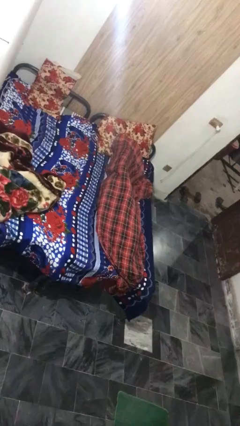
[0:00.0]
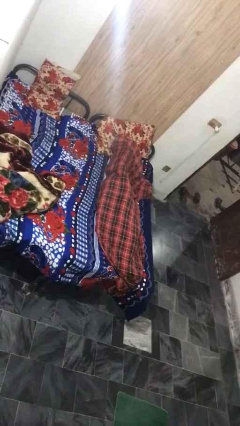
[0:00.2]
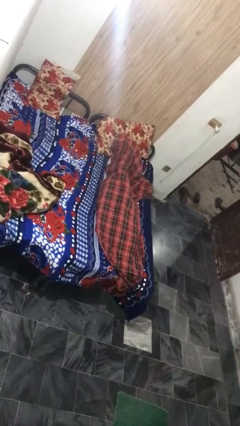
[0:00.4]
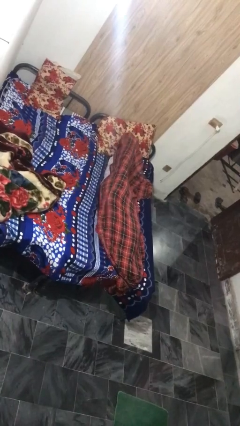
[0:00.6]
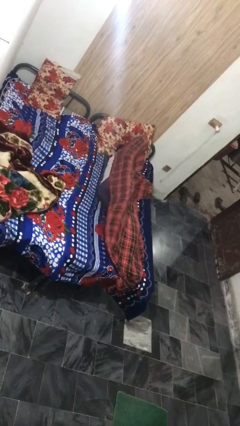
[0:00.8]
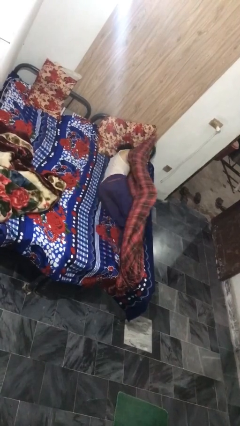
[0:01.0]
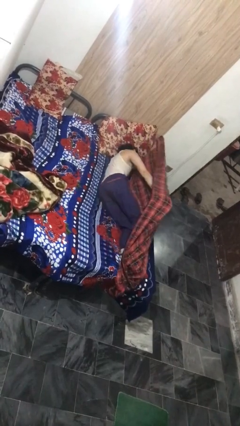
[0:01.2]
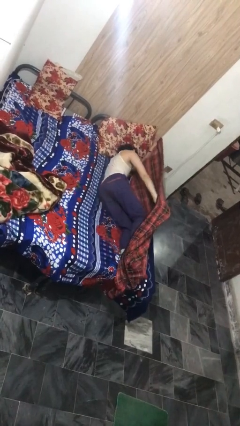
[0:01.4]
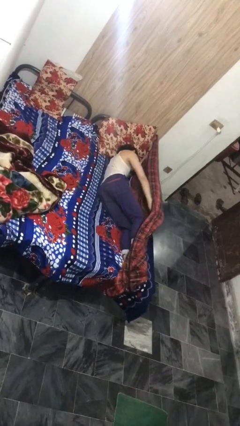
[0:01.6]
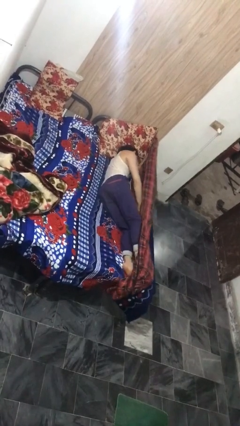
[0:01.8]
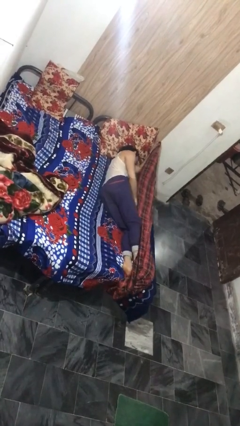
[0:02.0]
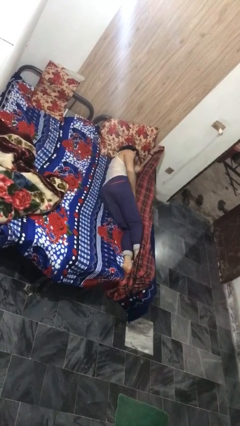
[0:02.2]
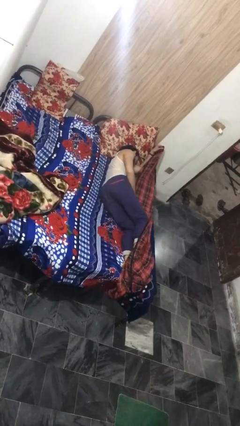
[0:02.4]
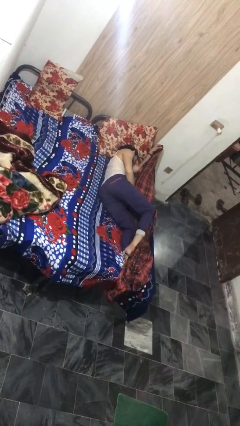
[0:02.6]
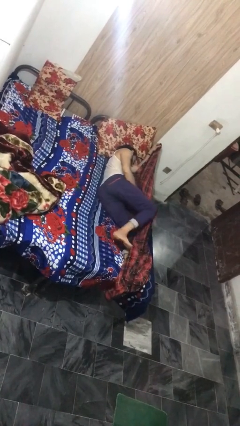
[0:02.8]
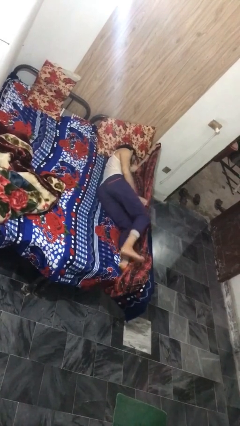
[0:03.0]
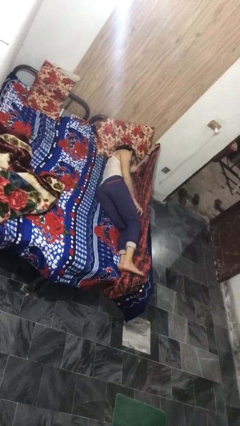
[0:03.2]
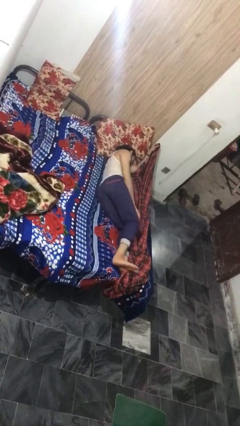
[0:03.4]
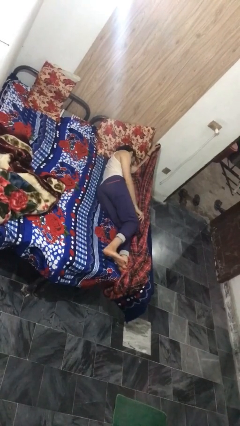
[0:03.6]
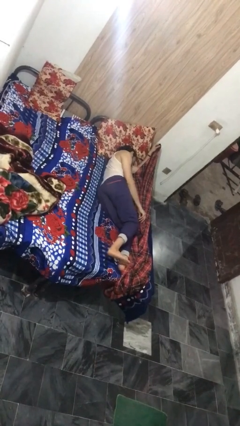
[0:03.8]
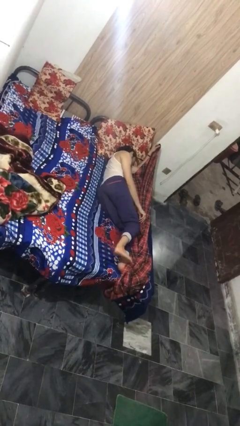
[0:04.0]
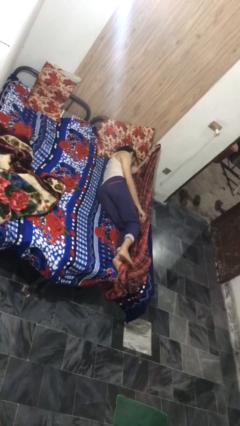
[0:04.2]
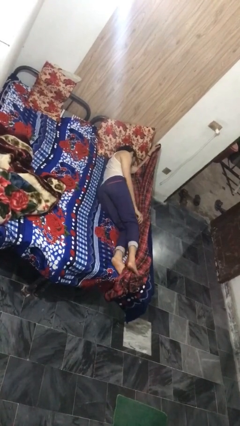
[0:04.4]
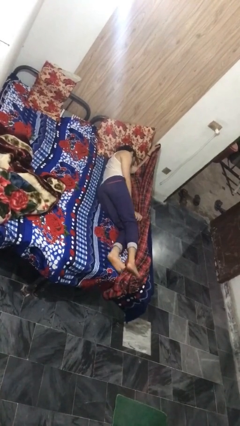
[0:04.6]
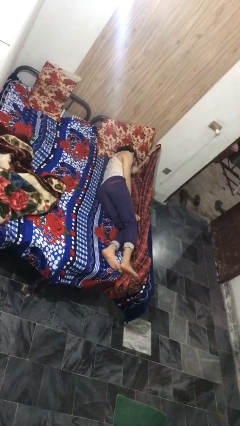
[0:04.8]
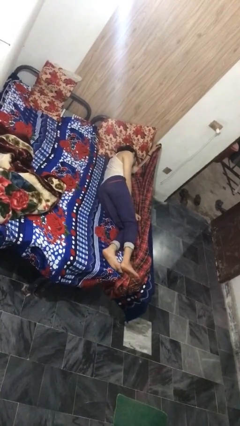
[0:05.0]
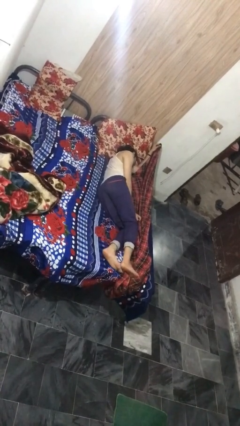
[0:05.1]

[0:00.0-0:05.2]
person uncovers with bedsheets

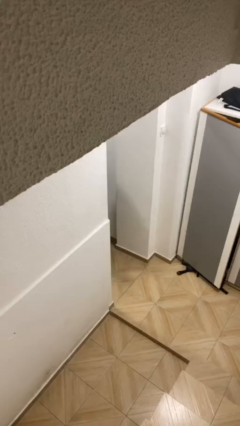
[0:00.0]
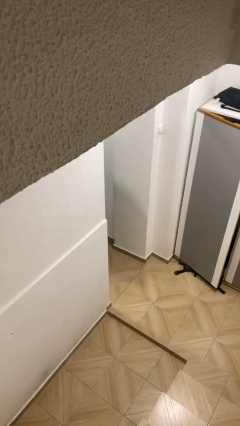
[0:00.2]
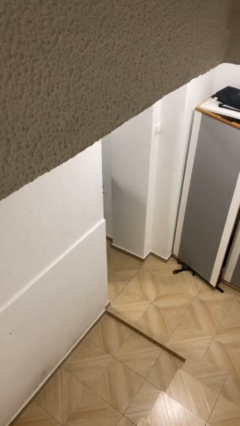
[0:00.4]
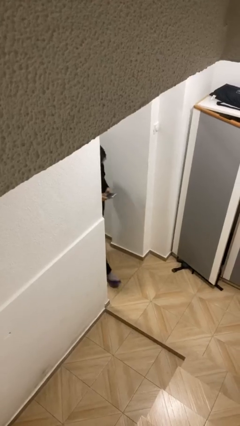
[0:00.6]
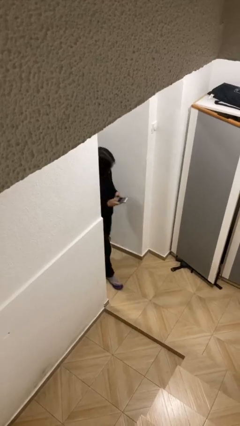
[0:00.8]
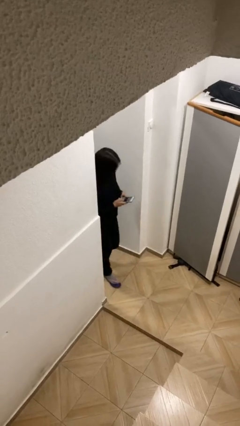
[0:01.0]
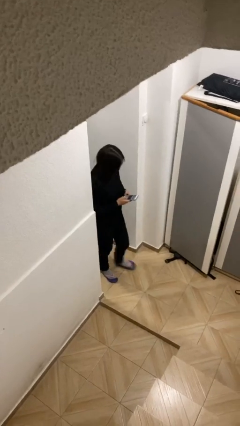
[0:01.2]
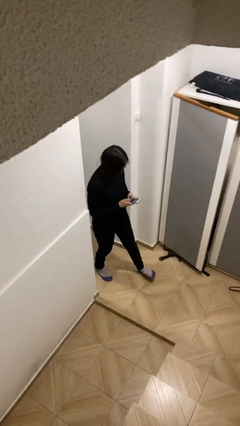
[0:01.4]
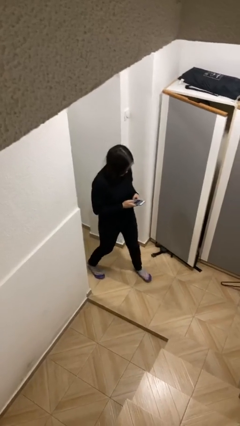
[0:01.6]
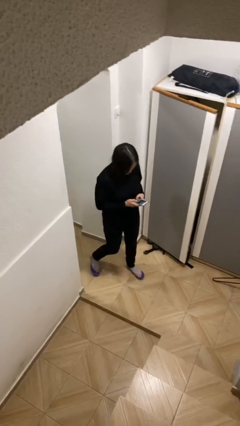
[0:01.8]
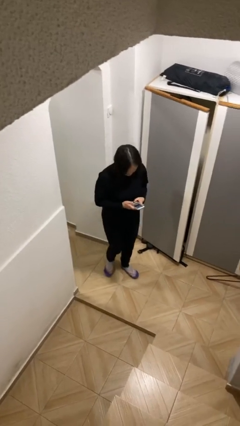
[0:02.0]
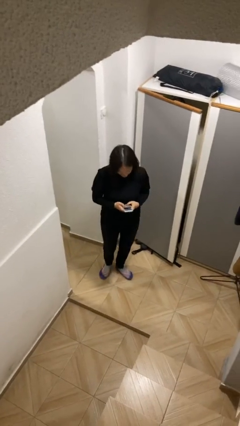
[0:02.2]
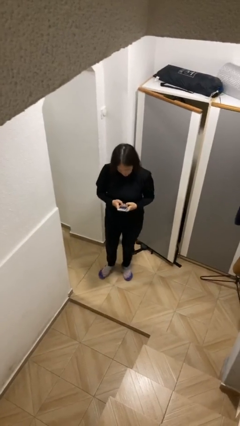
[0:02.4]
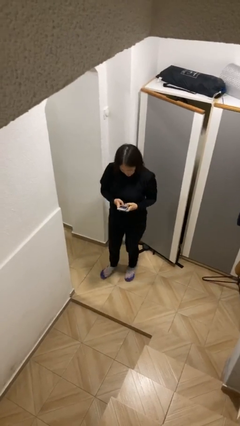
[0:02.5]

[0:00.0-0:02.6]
person enters scene through structure

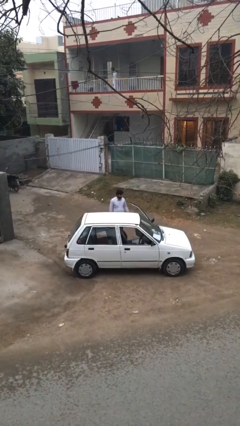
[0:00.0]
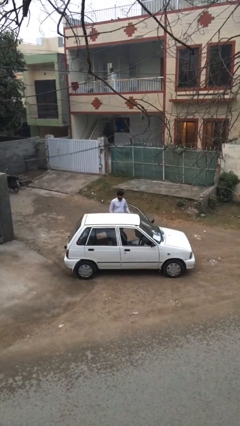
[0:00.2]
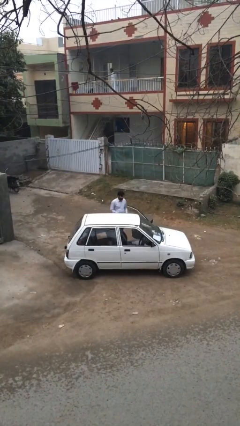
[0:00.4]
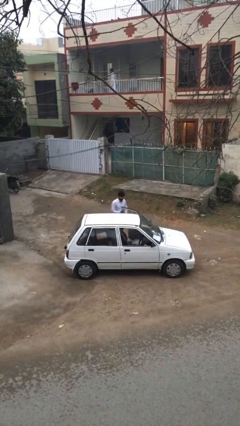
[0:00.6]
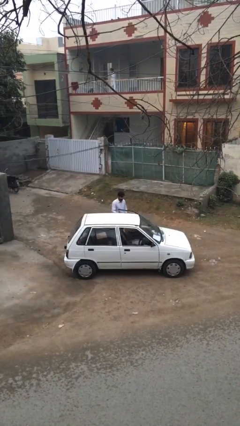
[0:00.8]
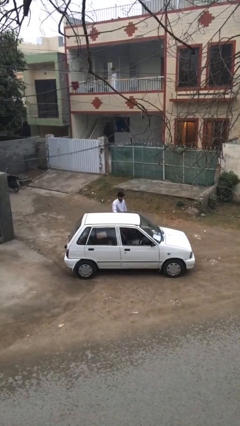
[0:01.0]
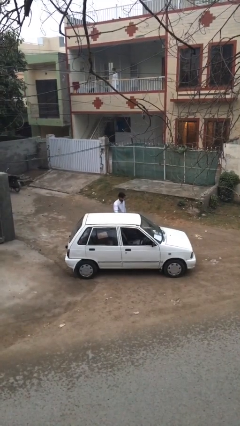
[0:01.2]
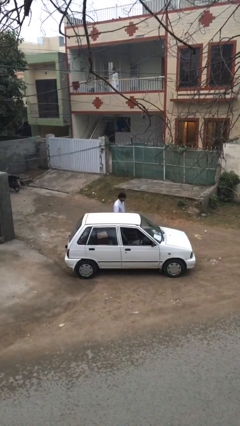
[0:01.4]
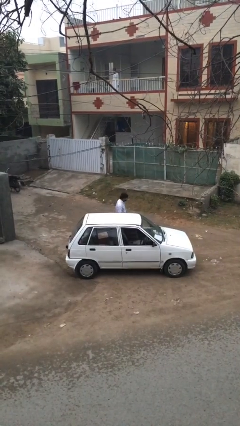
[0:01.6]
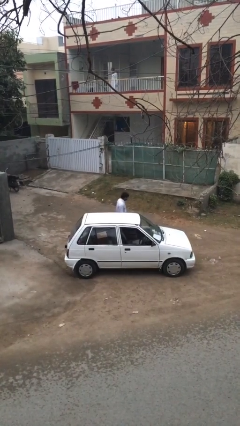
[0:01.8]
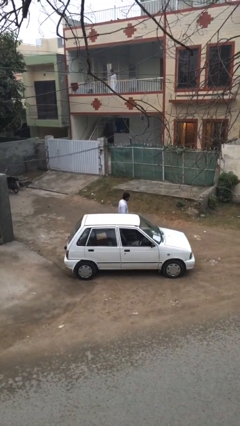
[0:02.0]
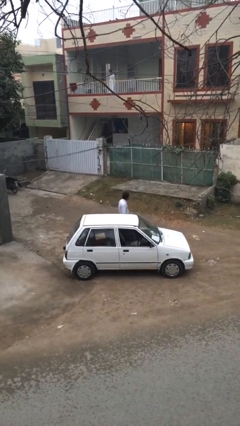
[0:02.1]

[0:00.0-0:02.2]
person closes car door

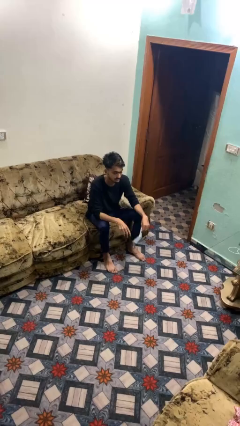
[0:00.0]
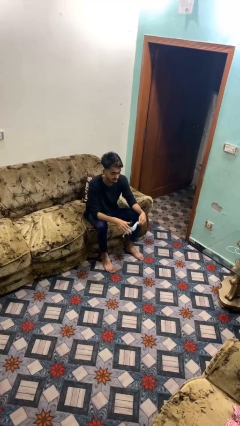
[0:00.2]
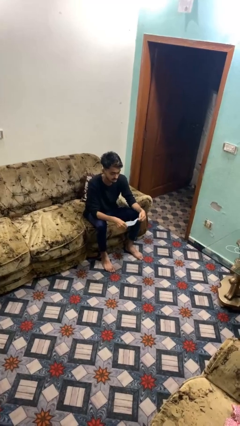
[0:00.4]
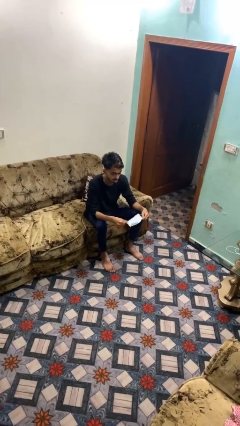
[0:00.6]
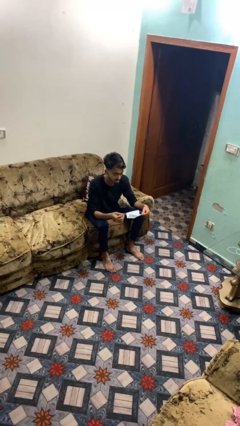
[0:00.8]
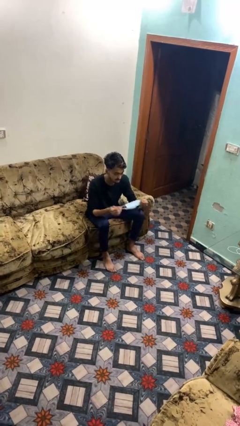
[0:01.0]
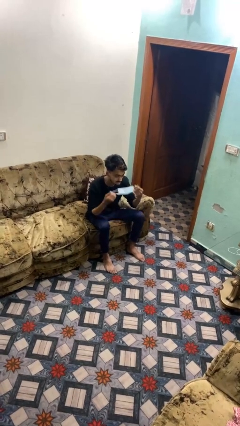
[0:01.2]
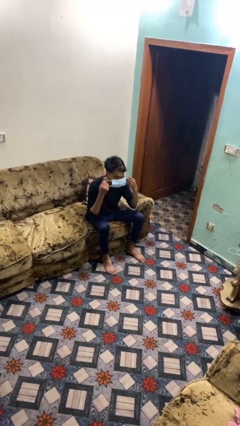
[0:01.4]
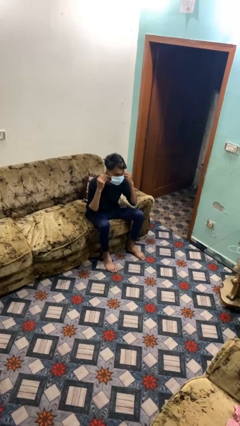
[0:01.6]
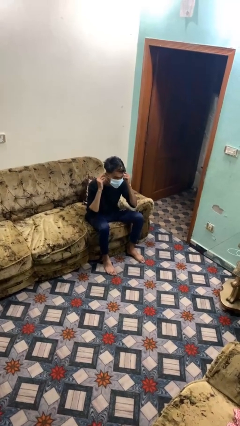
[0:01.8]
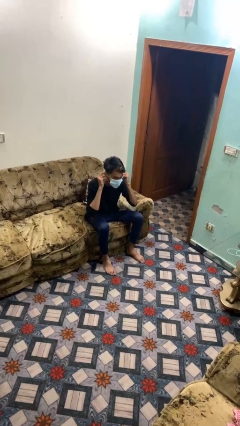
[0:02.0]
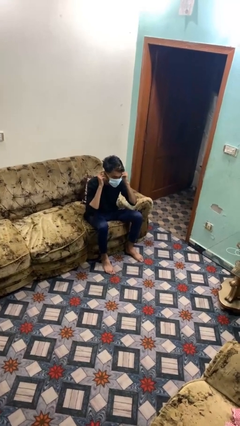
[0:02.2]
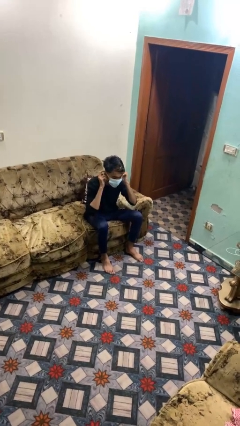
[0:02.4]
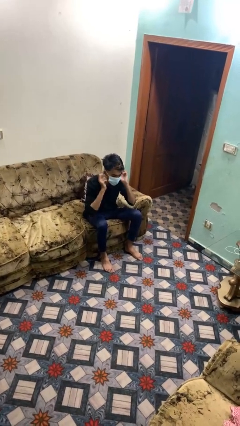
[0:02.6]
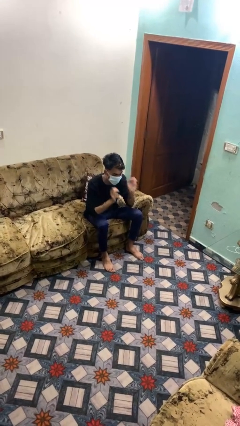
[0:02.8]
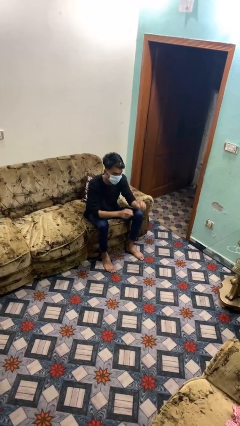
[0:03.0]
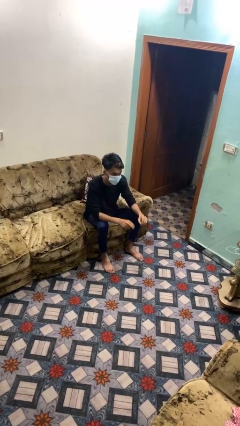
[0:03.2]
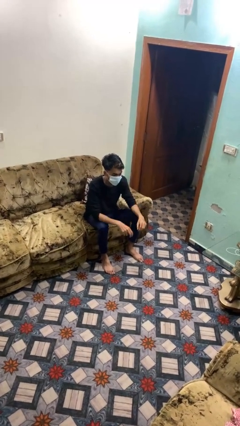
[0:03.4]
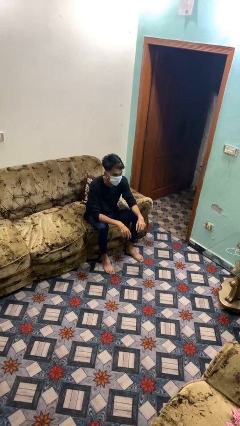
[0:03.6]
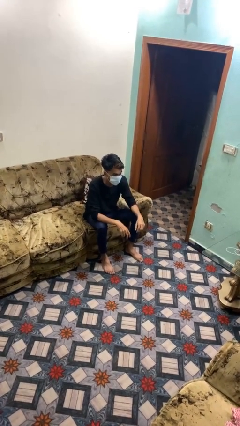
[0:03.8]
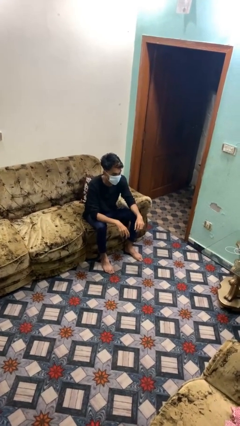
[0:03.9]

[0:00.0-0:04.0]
person puts on facemask

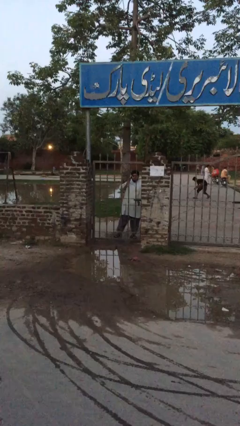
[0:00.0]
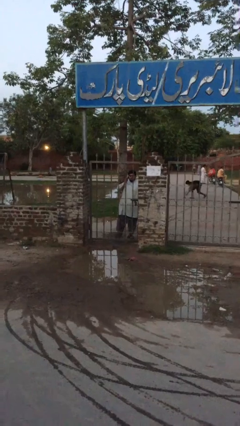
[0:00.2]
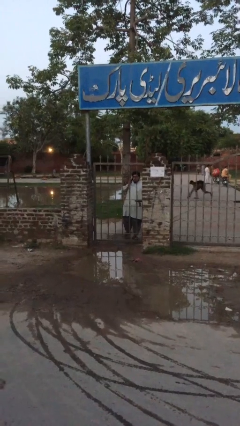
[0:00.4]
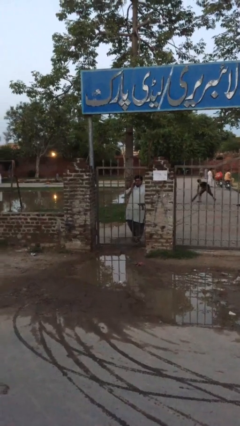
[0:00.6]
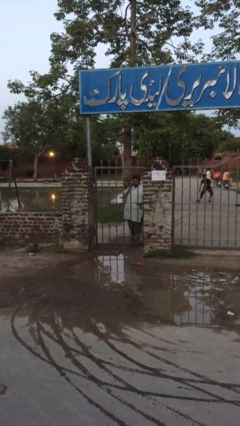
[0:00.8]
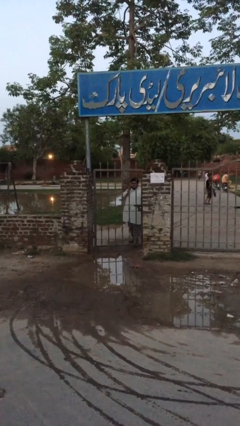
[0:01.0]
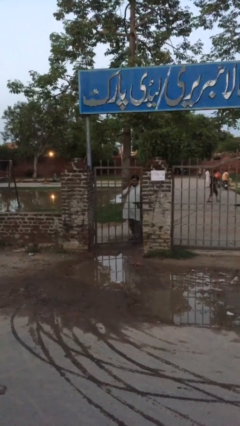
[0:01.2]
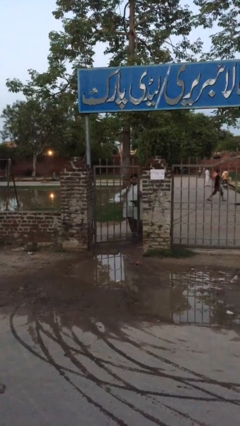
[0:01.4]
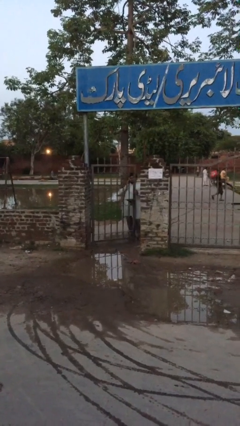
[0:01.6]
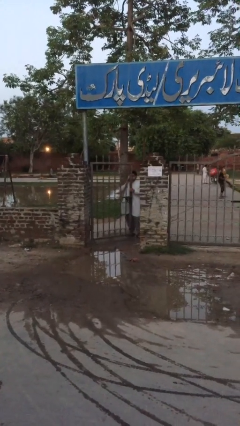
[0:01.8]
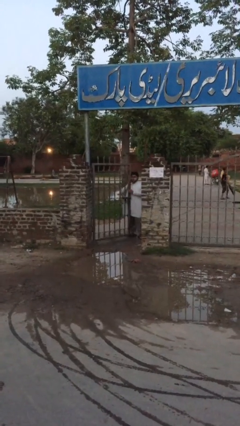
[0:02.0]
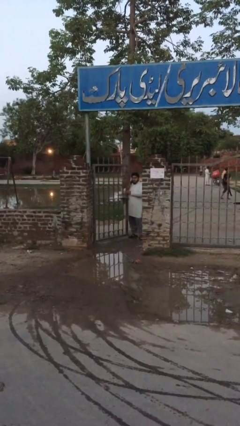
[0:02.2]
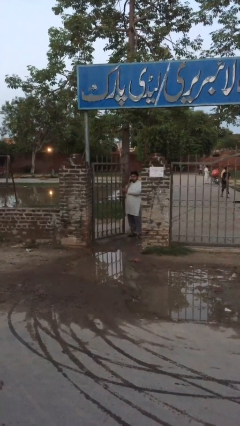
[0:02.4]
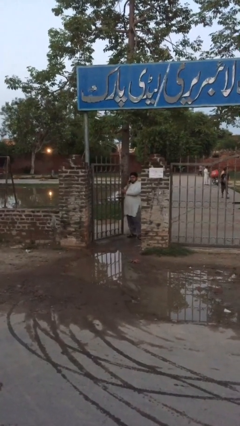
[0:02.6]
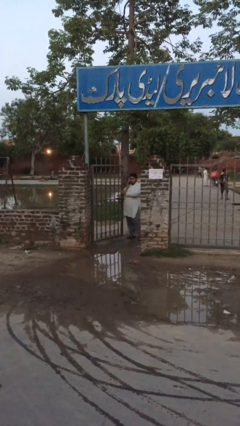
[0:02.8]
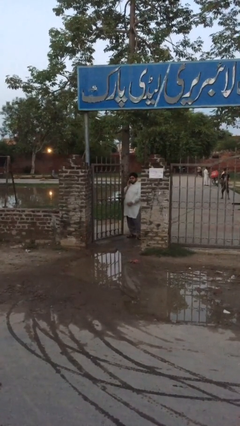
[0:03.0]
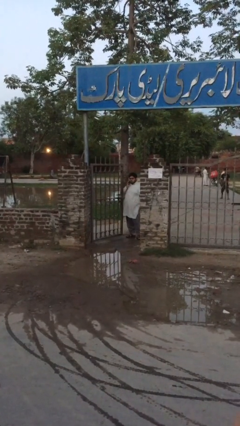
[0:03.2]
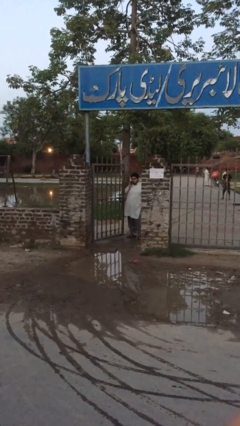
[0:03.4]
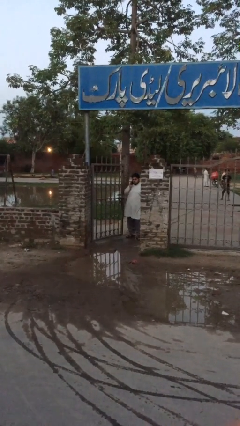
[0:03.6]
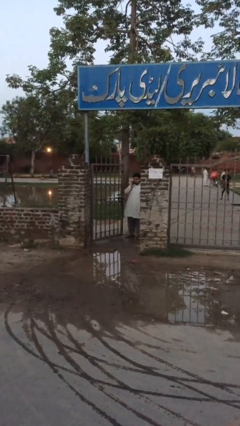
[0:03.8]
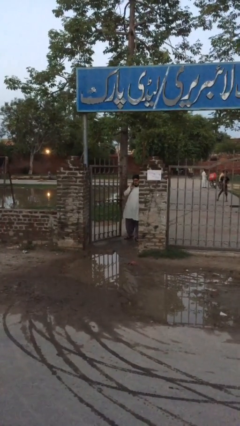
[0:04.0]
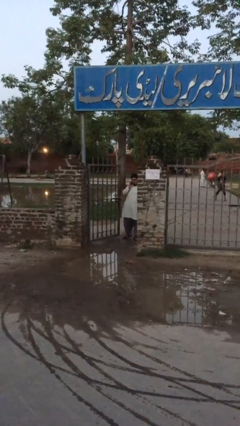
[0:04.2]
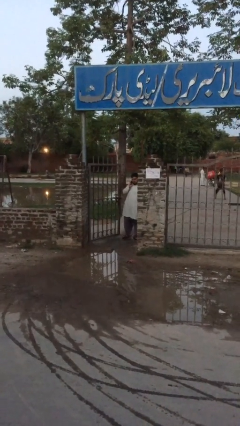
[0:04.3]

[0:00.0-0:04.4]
person opens facility door
